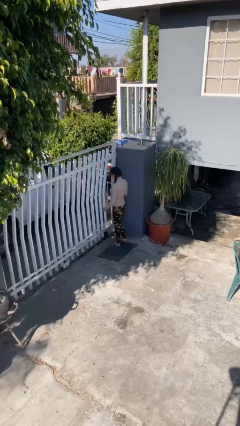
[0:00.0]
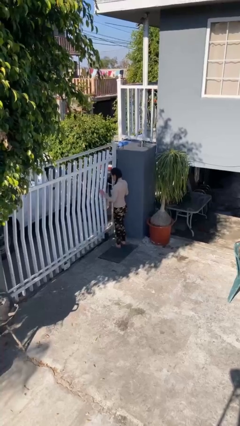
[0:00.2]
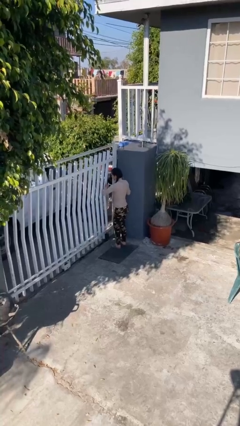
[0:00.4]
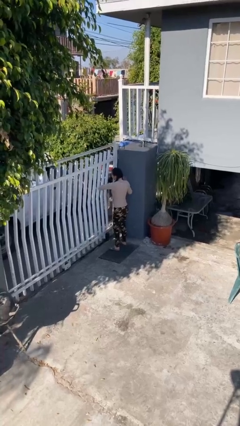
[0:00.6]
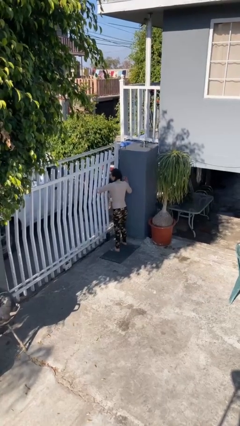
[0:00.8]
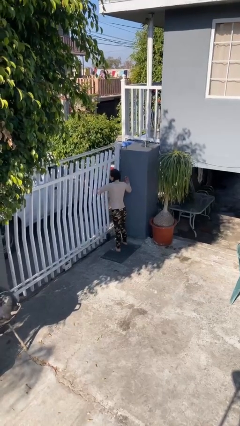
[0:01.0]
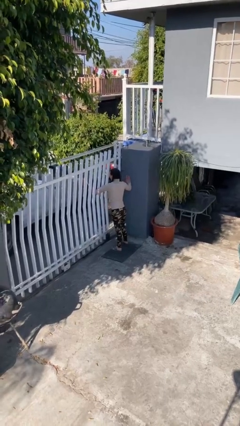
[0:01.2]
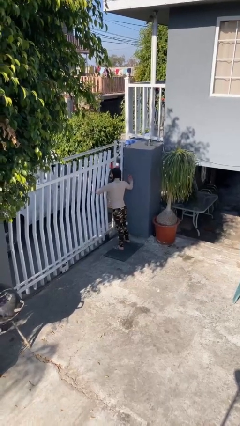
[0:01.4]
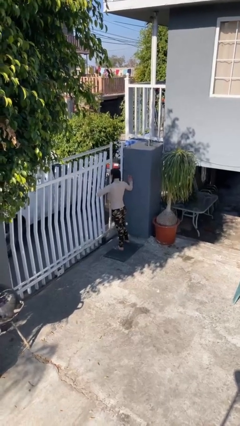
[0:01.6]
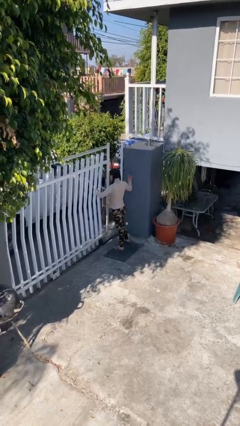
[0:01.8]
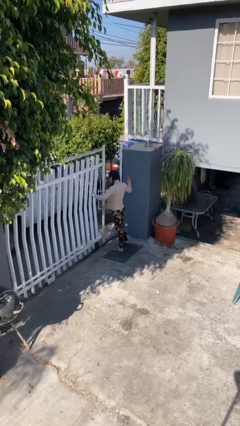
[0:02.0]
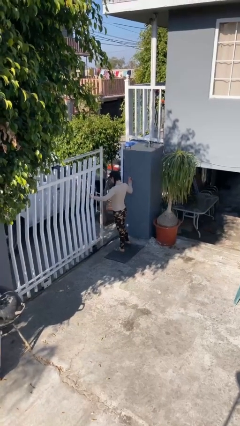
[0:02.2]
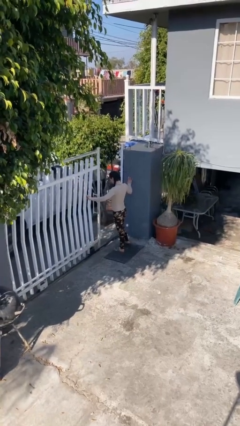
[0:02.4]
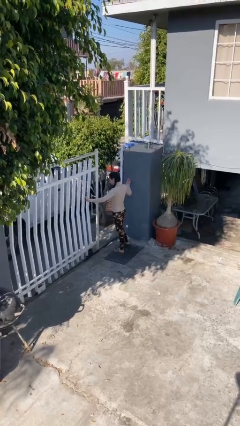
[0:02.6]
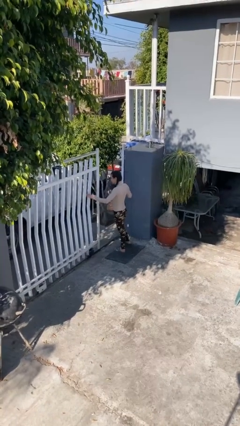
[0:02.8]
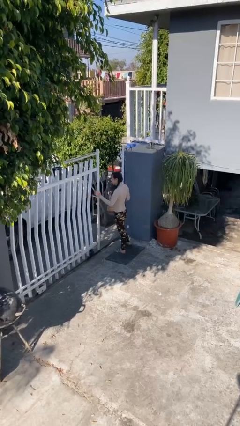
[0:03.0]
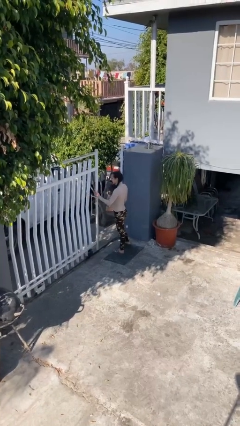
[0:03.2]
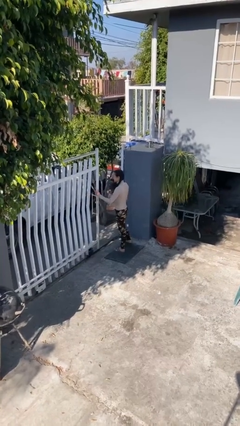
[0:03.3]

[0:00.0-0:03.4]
person opens facility door

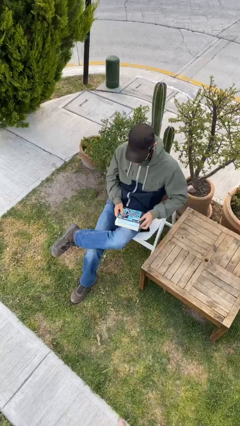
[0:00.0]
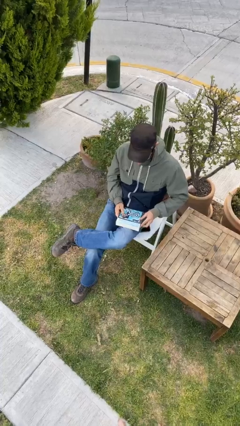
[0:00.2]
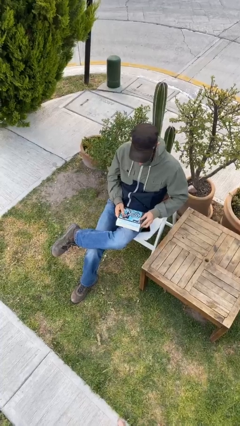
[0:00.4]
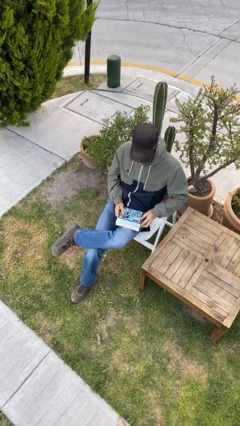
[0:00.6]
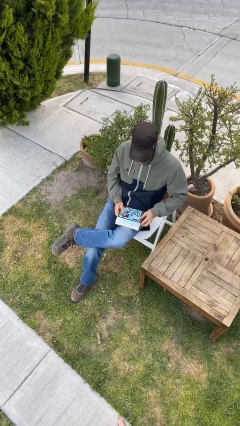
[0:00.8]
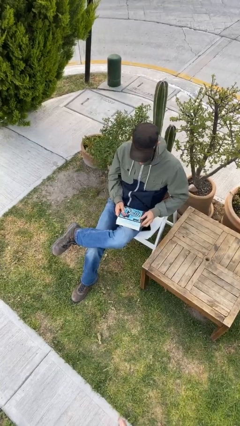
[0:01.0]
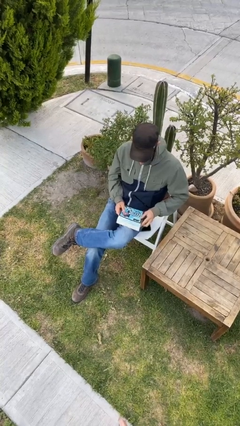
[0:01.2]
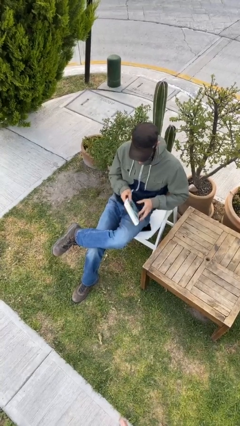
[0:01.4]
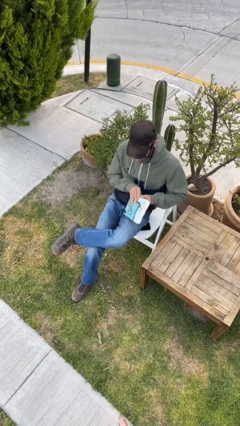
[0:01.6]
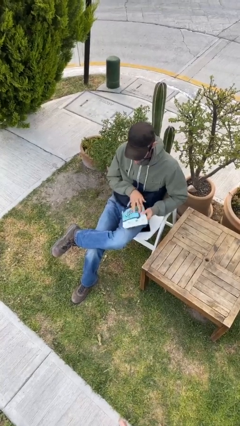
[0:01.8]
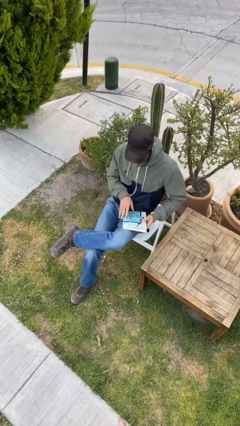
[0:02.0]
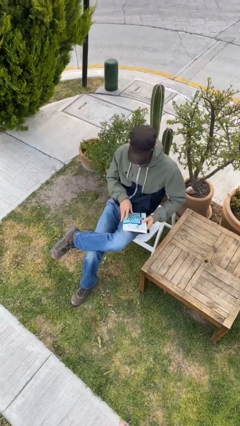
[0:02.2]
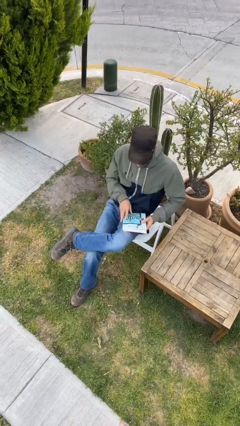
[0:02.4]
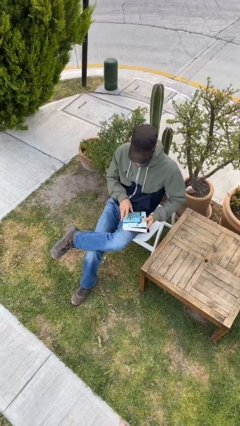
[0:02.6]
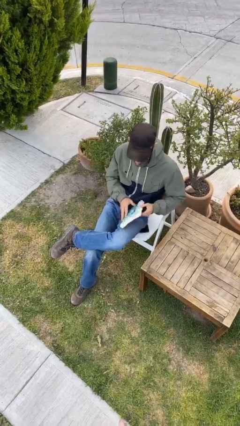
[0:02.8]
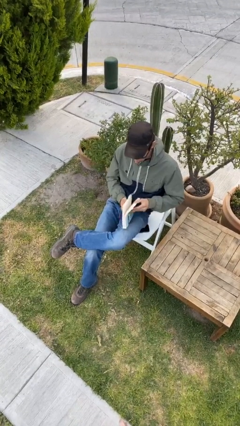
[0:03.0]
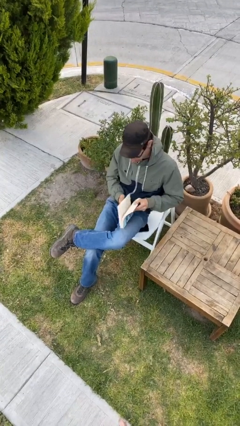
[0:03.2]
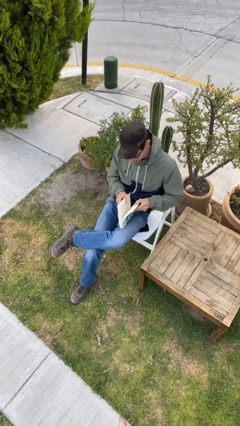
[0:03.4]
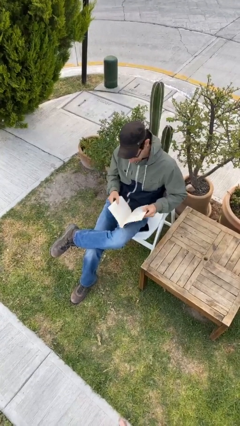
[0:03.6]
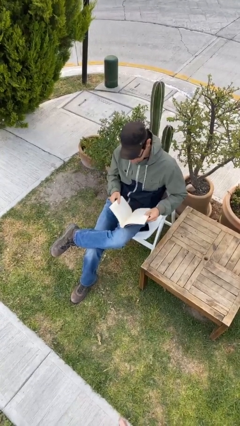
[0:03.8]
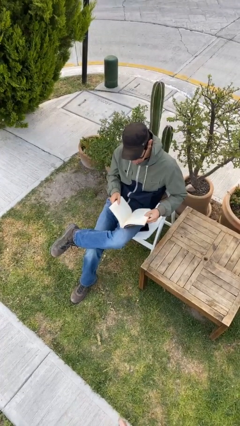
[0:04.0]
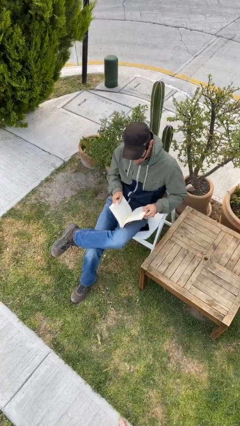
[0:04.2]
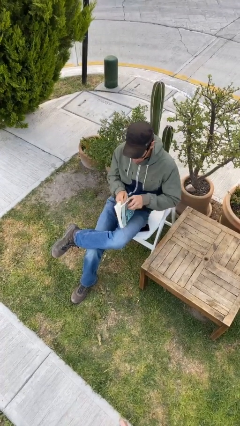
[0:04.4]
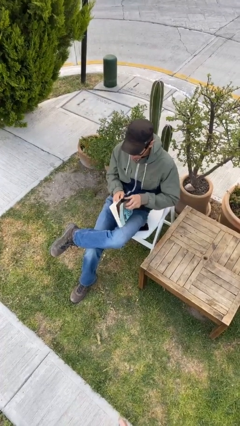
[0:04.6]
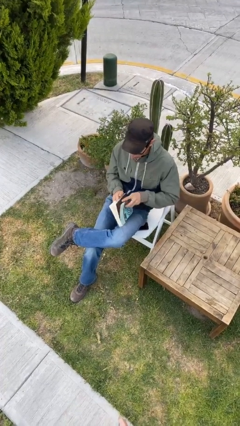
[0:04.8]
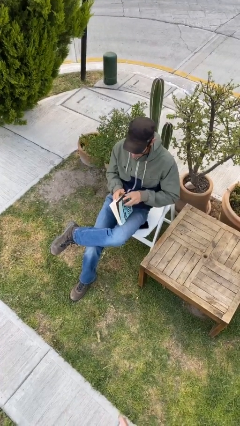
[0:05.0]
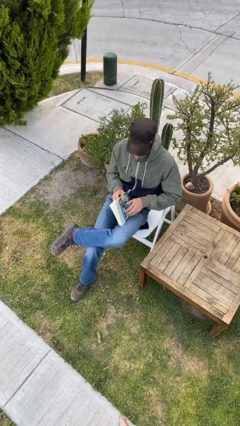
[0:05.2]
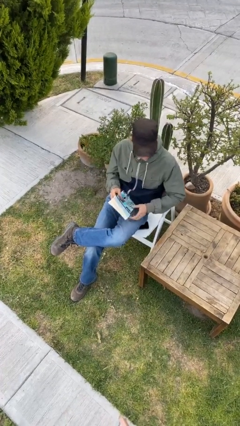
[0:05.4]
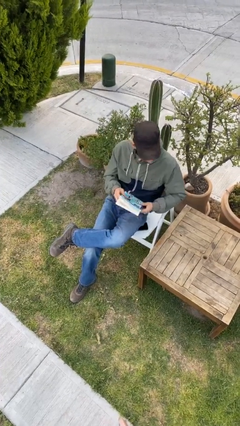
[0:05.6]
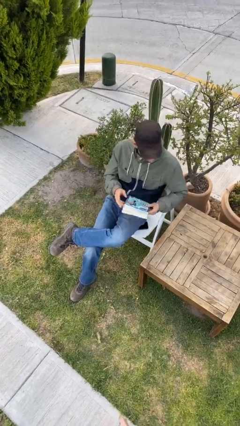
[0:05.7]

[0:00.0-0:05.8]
person reads document

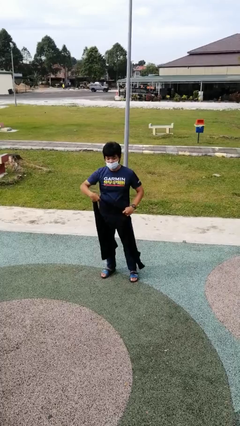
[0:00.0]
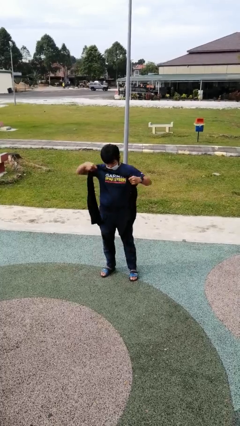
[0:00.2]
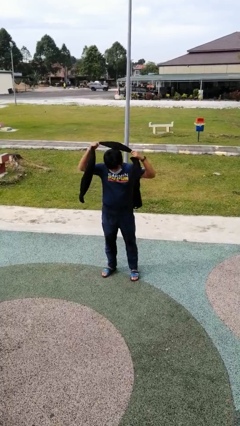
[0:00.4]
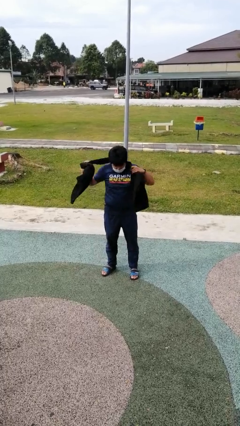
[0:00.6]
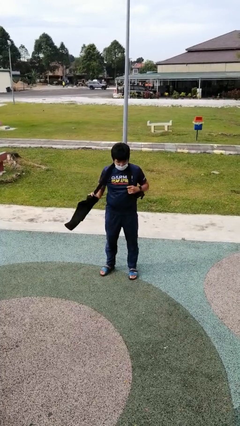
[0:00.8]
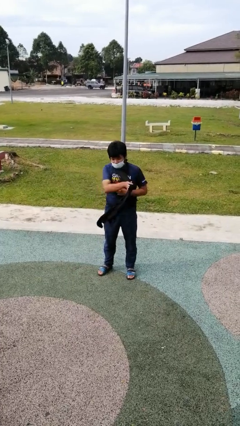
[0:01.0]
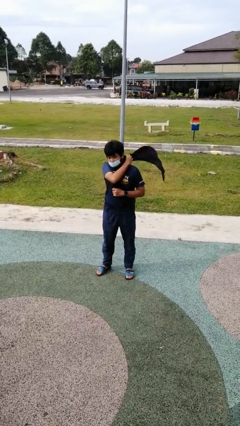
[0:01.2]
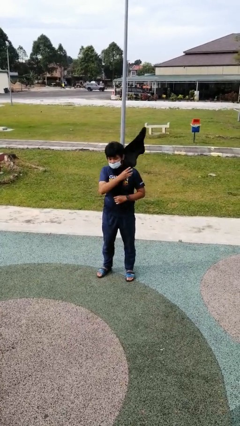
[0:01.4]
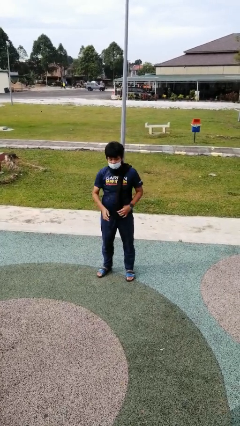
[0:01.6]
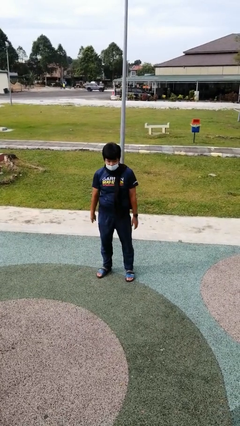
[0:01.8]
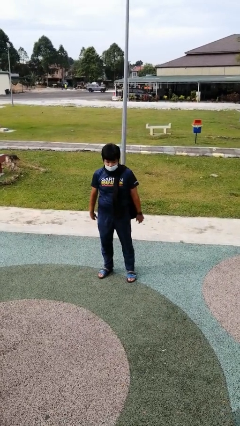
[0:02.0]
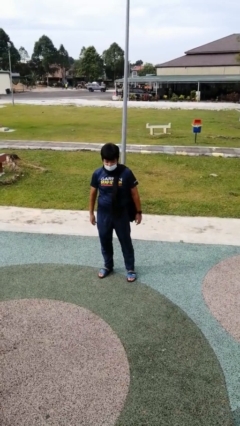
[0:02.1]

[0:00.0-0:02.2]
person puts on scarf

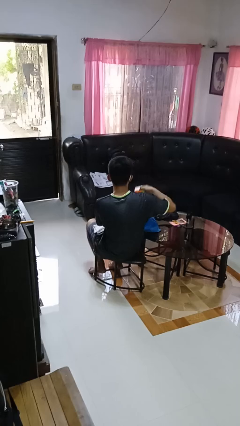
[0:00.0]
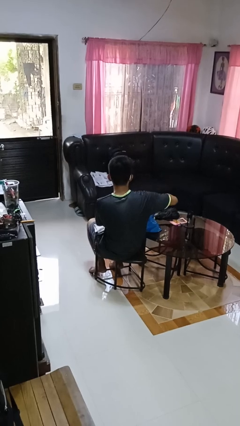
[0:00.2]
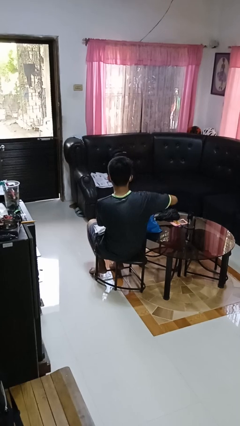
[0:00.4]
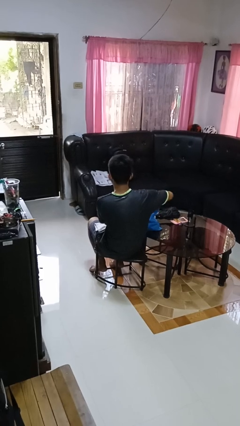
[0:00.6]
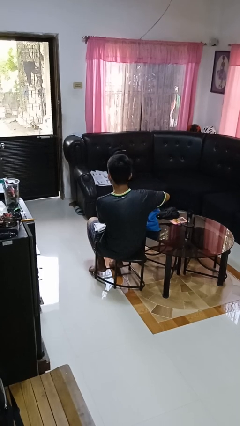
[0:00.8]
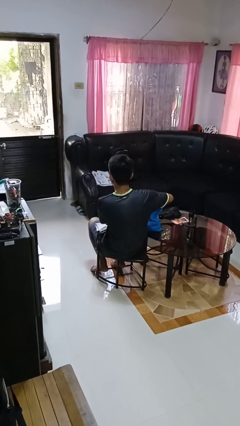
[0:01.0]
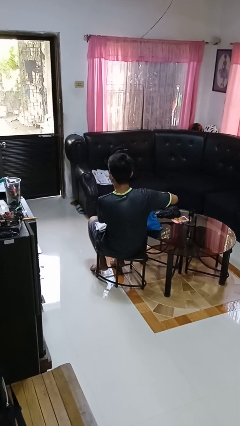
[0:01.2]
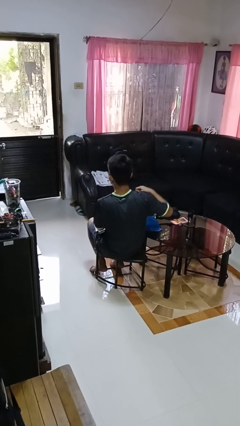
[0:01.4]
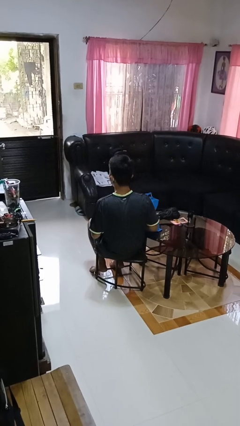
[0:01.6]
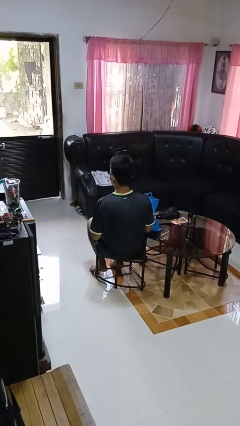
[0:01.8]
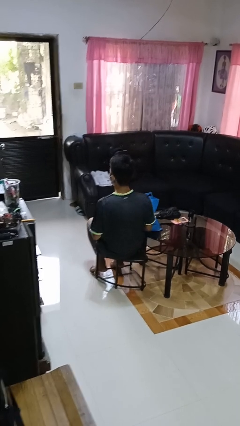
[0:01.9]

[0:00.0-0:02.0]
person puts object into bag

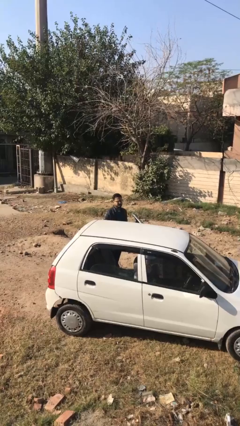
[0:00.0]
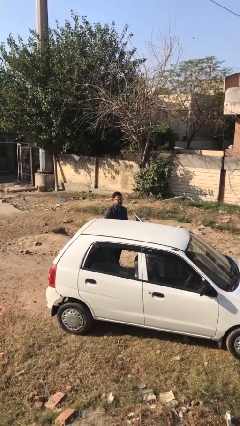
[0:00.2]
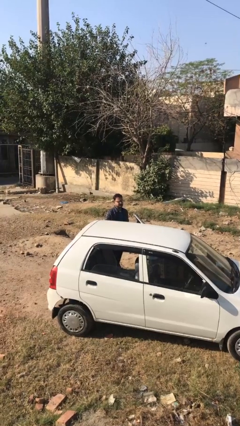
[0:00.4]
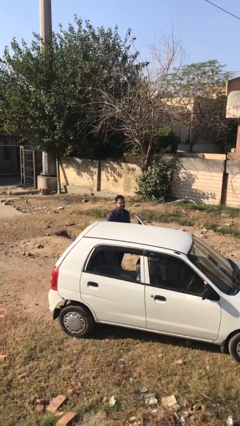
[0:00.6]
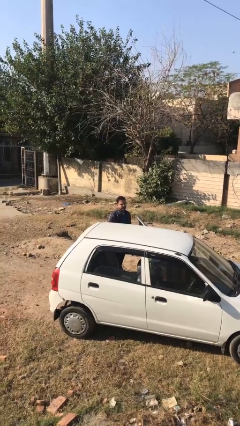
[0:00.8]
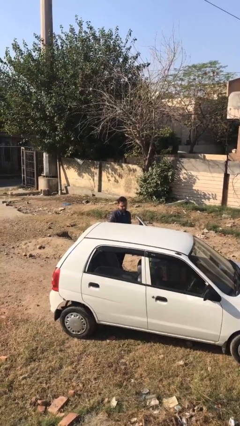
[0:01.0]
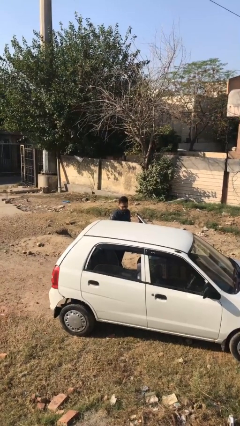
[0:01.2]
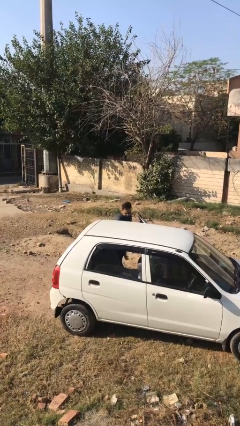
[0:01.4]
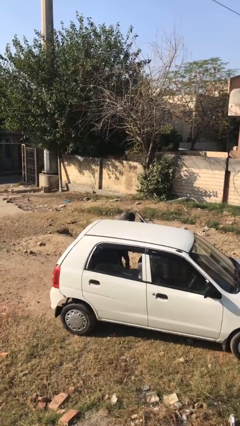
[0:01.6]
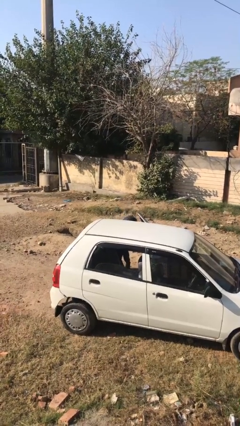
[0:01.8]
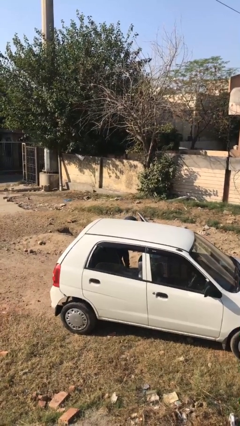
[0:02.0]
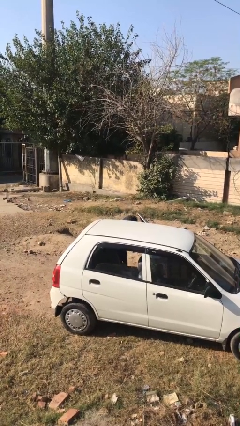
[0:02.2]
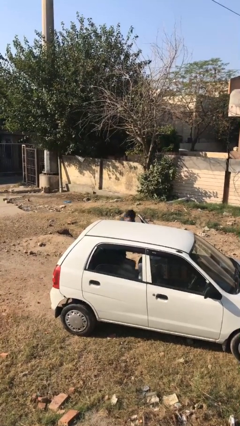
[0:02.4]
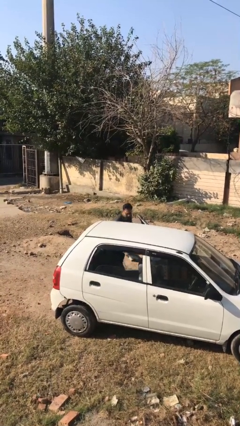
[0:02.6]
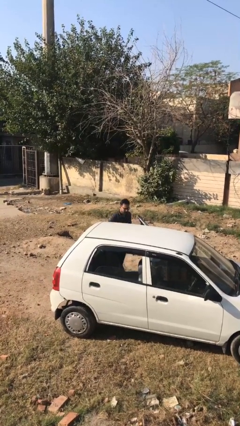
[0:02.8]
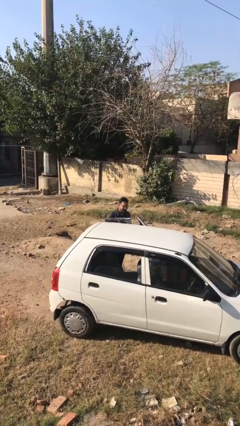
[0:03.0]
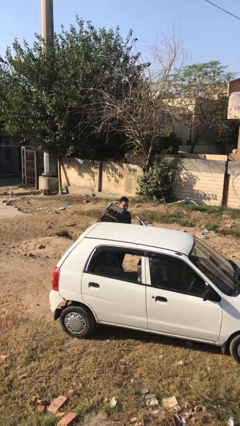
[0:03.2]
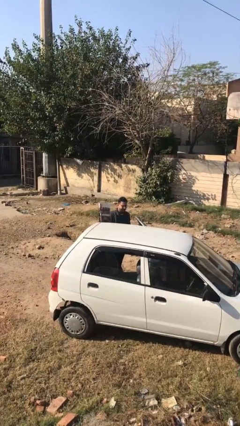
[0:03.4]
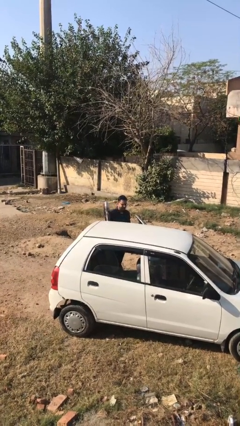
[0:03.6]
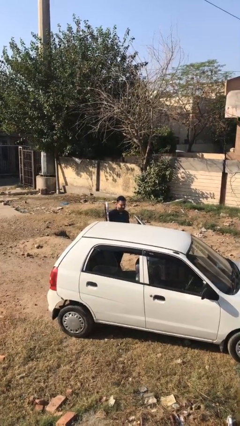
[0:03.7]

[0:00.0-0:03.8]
person unloads car

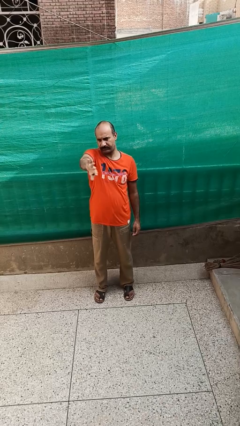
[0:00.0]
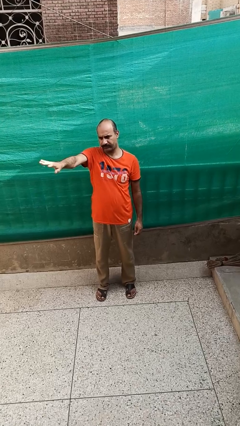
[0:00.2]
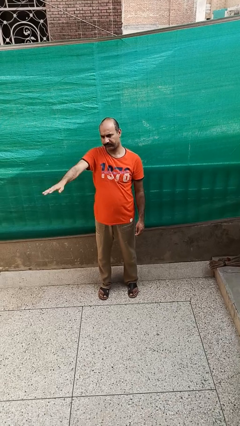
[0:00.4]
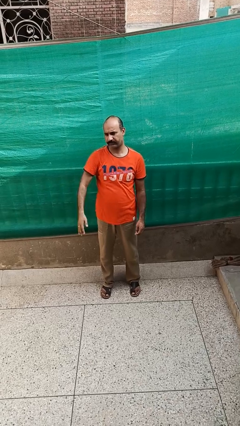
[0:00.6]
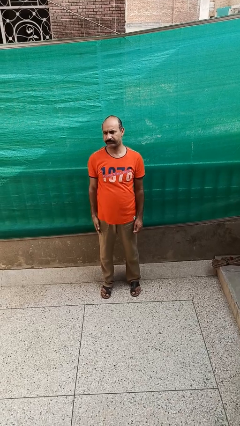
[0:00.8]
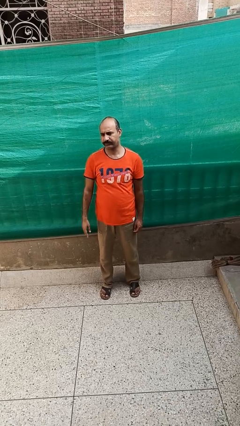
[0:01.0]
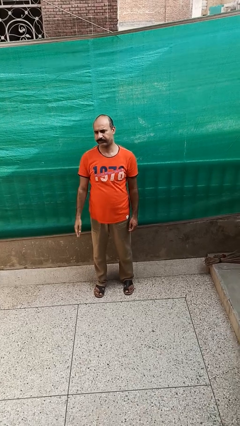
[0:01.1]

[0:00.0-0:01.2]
person gestures swipe right
